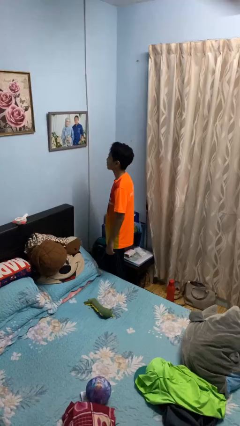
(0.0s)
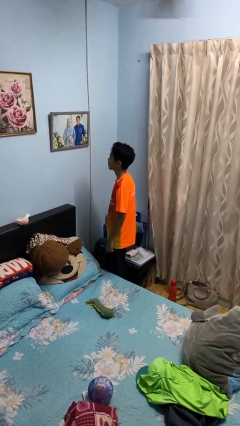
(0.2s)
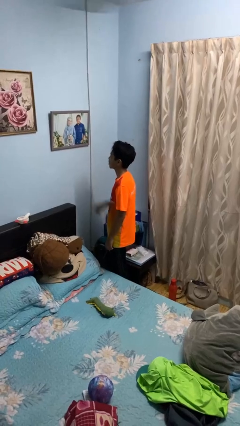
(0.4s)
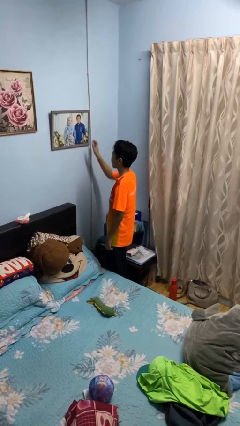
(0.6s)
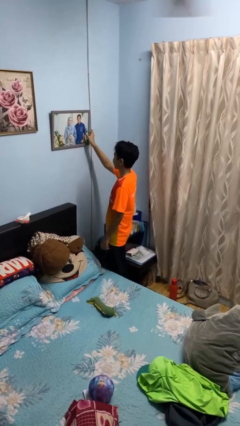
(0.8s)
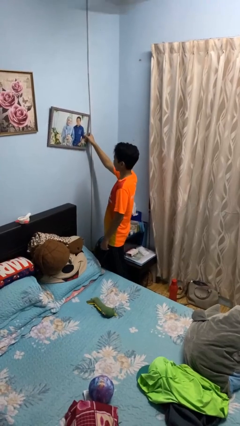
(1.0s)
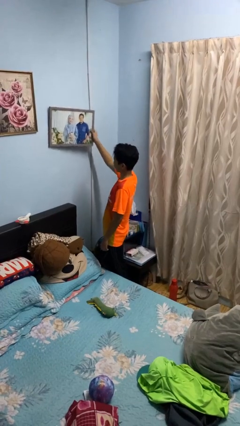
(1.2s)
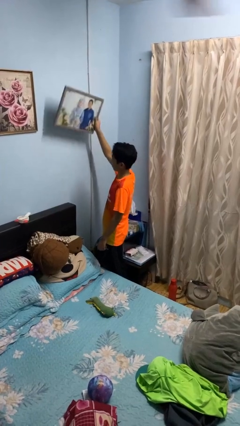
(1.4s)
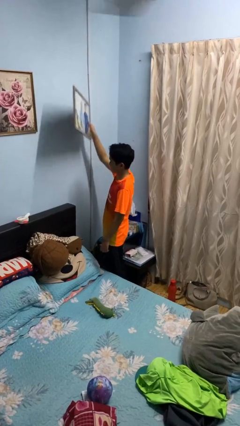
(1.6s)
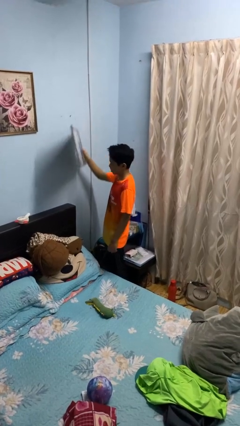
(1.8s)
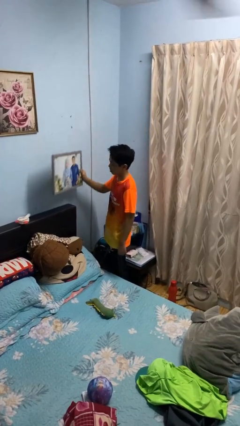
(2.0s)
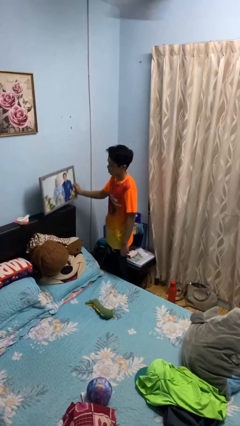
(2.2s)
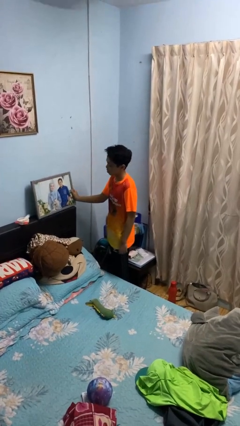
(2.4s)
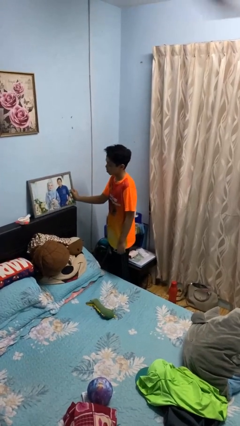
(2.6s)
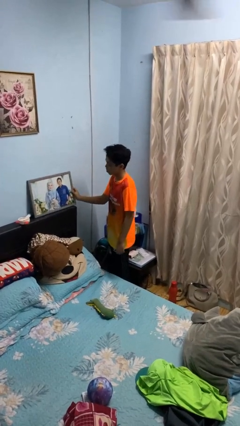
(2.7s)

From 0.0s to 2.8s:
person takes down picture frame

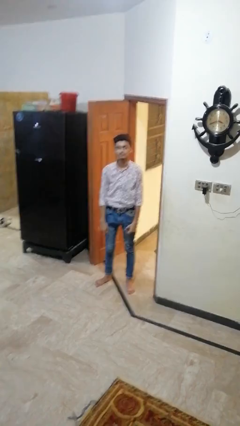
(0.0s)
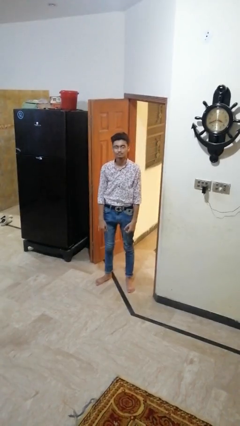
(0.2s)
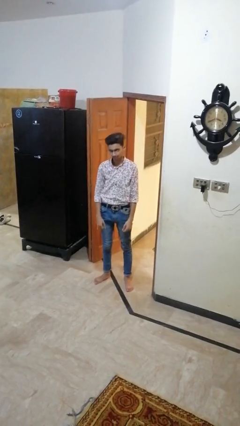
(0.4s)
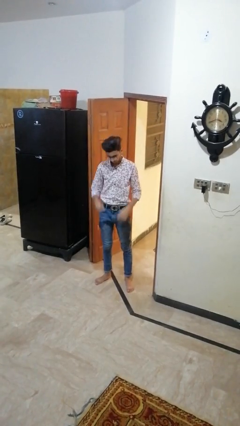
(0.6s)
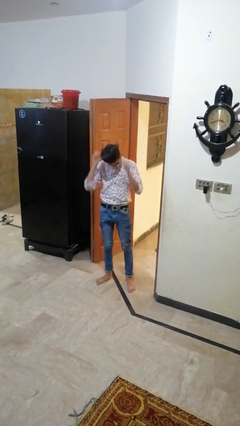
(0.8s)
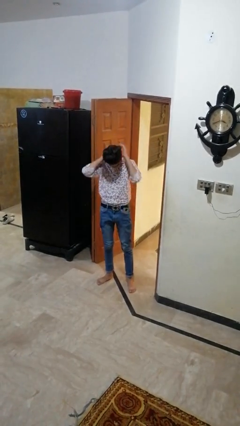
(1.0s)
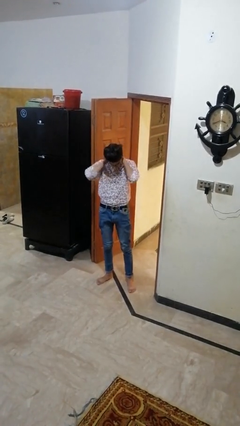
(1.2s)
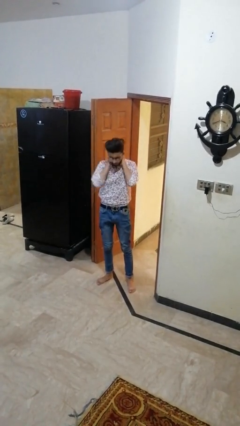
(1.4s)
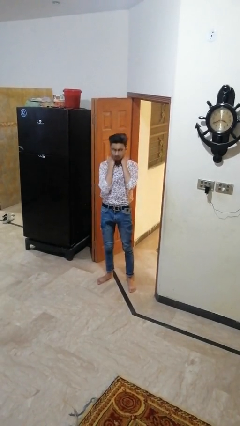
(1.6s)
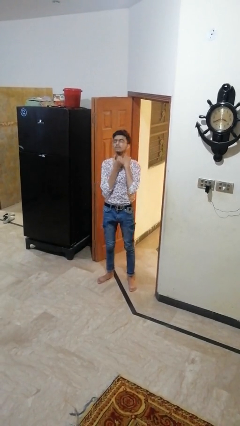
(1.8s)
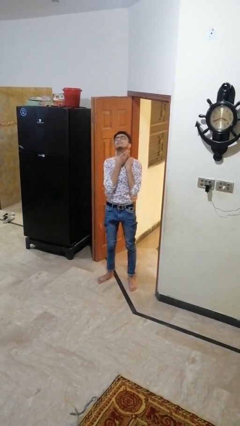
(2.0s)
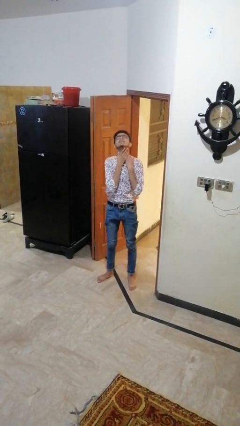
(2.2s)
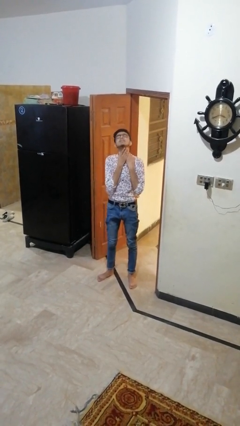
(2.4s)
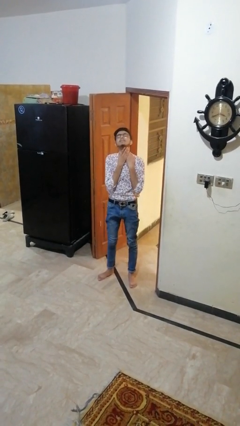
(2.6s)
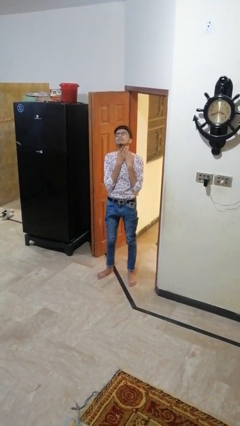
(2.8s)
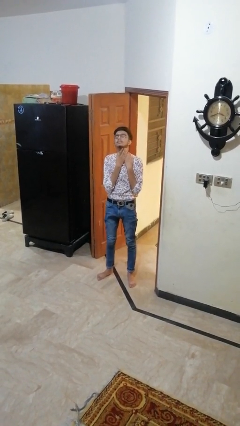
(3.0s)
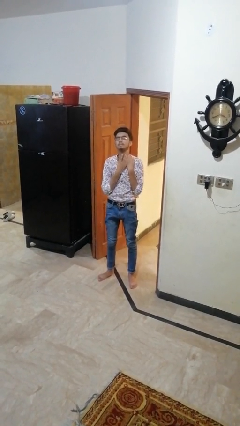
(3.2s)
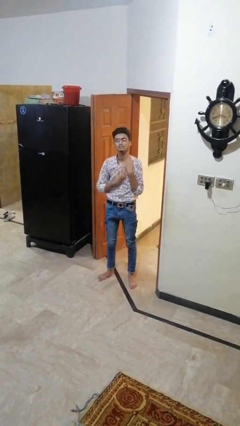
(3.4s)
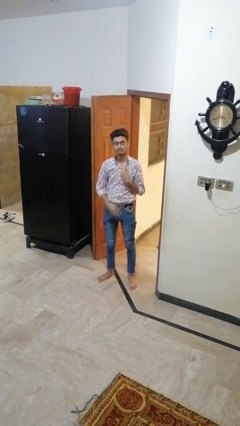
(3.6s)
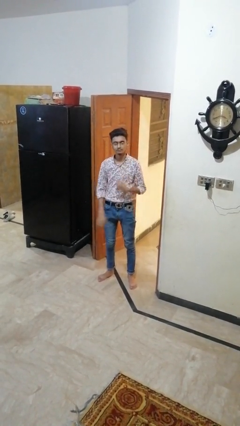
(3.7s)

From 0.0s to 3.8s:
person rubs neck

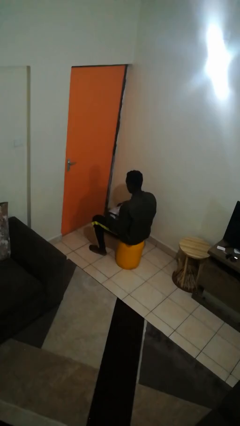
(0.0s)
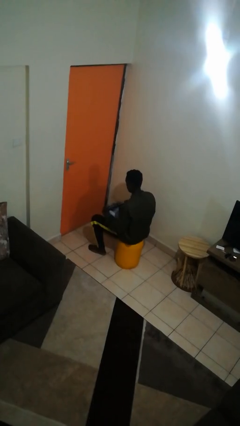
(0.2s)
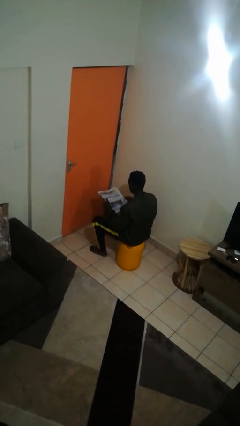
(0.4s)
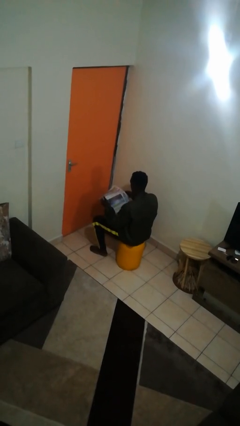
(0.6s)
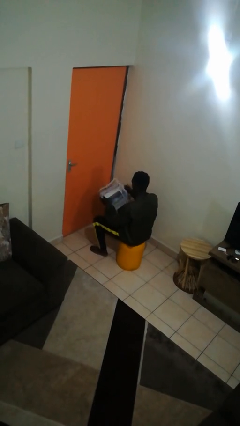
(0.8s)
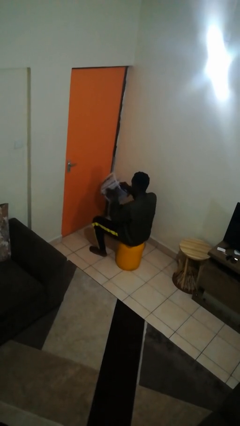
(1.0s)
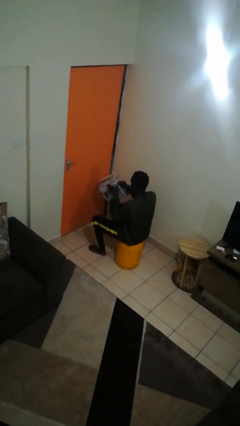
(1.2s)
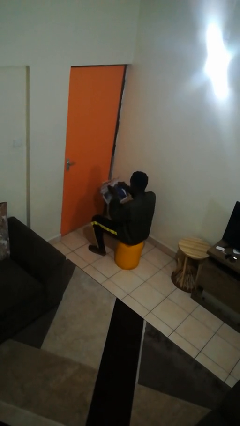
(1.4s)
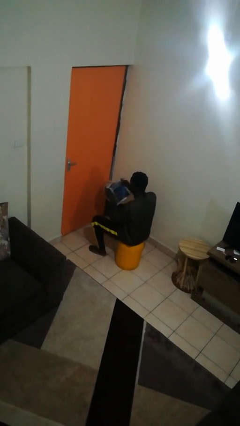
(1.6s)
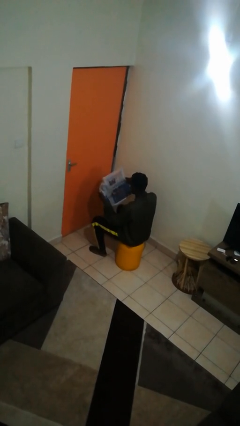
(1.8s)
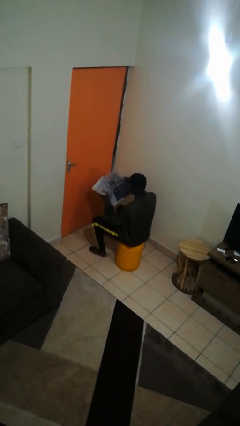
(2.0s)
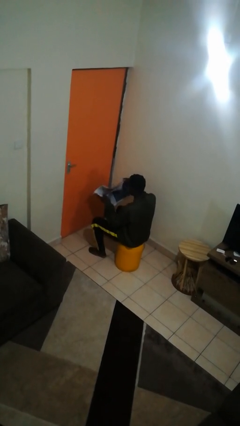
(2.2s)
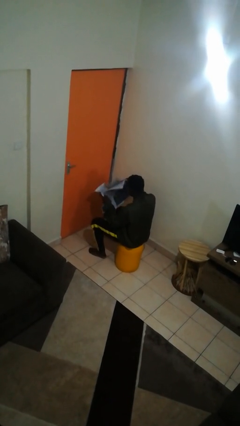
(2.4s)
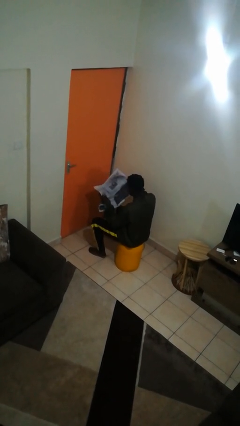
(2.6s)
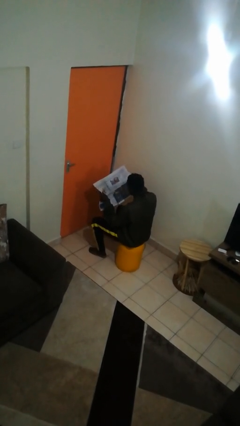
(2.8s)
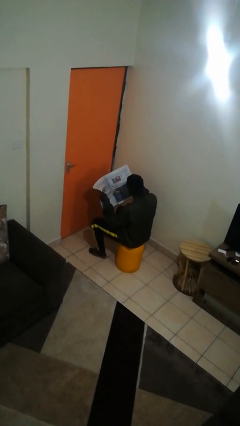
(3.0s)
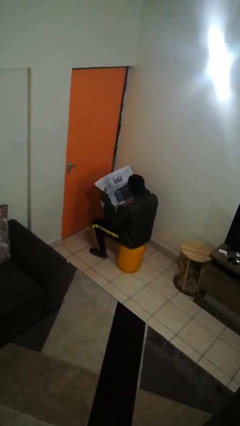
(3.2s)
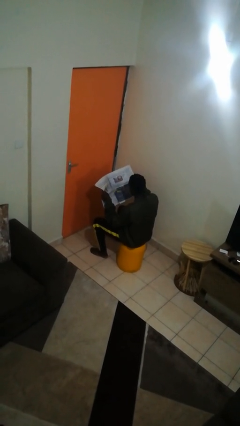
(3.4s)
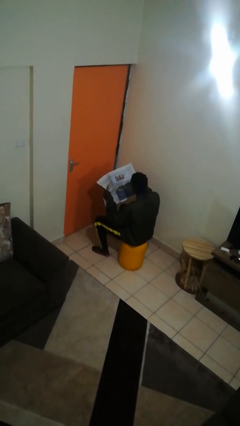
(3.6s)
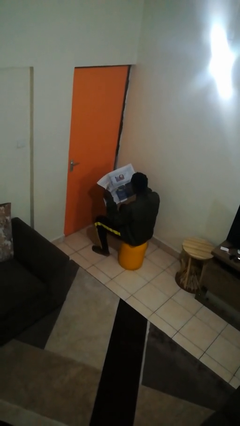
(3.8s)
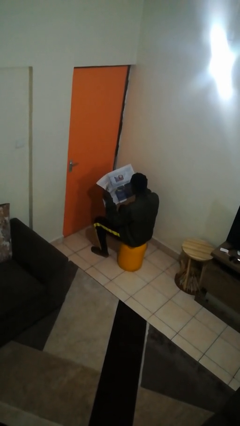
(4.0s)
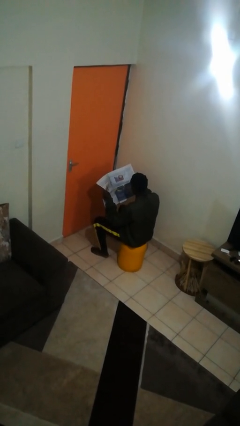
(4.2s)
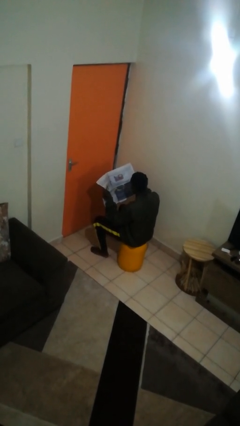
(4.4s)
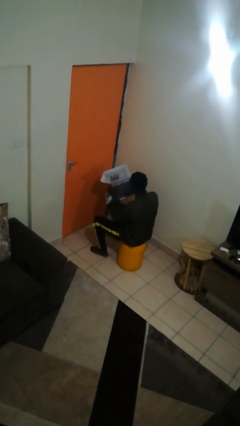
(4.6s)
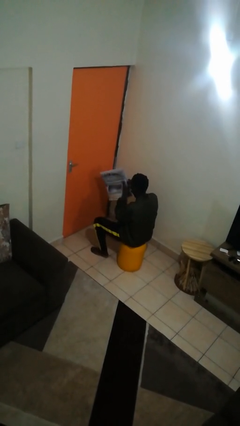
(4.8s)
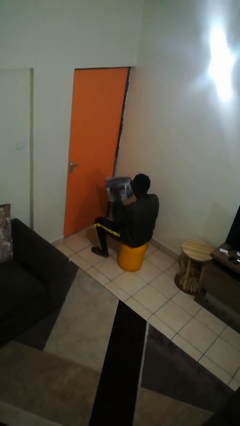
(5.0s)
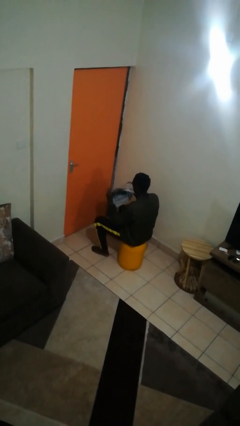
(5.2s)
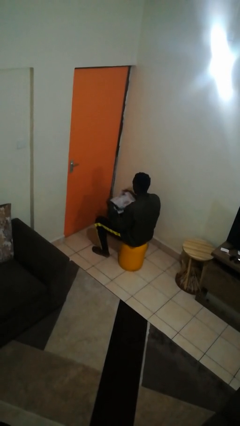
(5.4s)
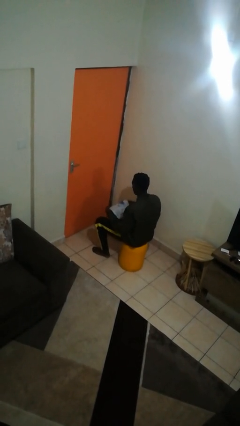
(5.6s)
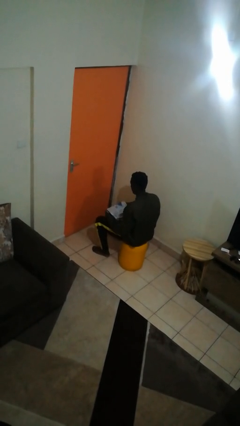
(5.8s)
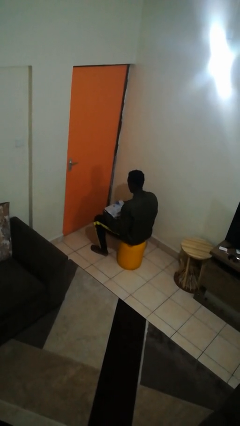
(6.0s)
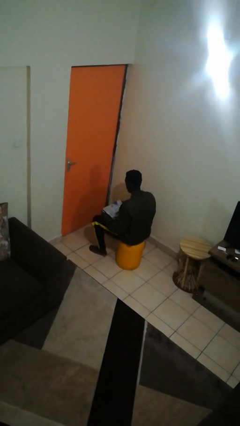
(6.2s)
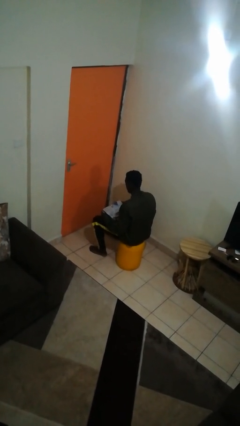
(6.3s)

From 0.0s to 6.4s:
person reads newspaper

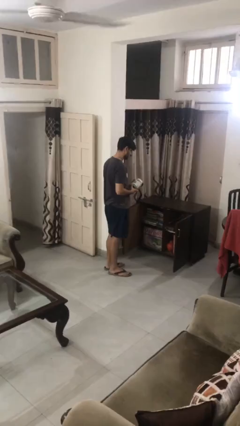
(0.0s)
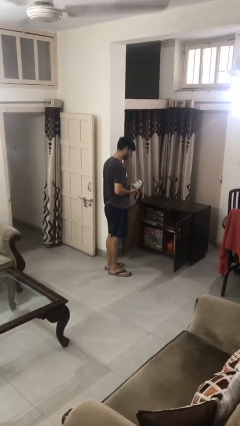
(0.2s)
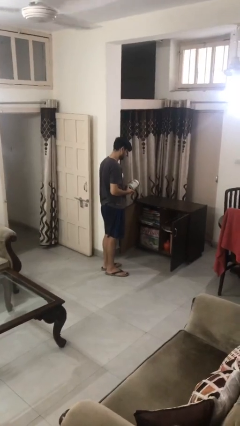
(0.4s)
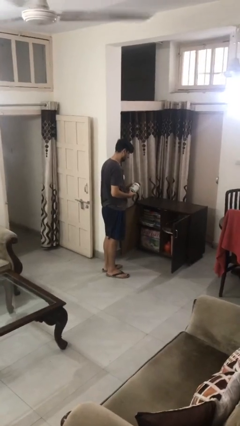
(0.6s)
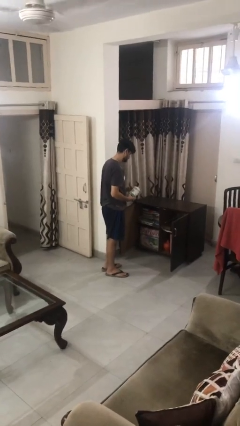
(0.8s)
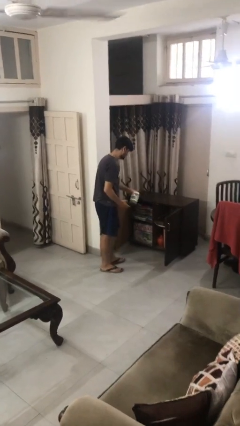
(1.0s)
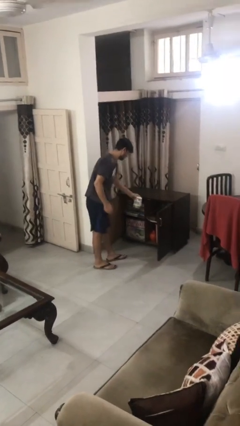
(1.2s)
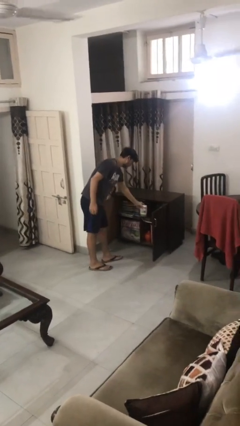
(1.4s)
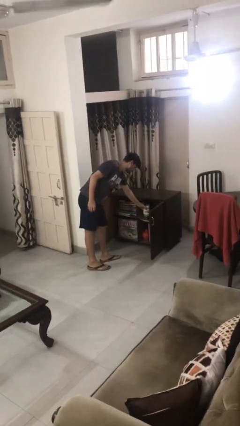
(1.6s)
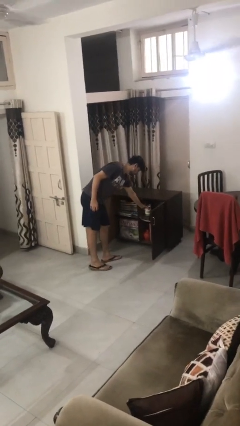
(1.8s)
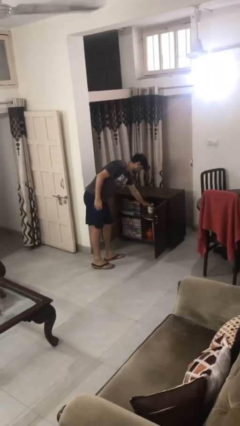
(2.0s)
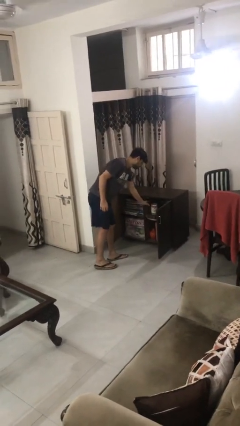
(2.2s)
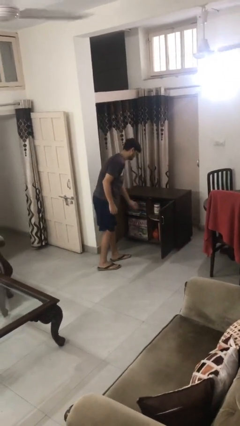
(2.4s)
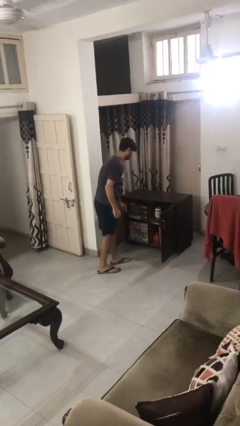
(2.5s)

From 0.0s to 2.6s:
person puts down object into cabinet

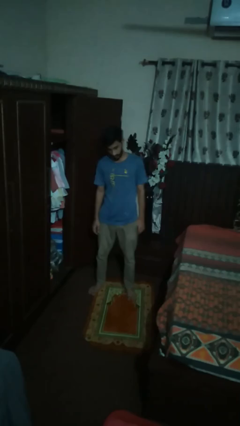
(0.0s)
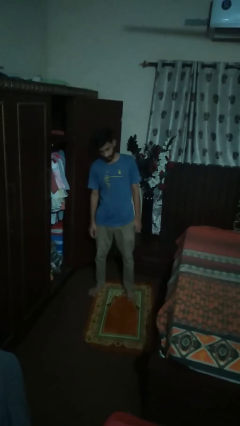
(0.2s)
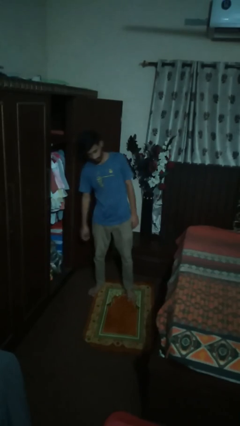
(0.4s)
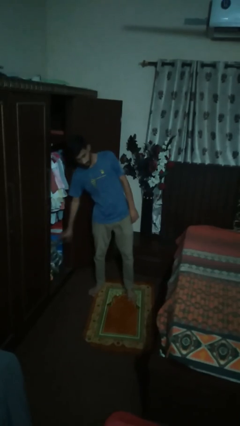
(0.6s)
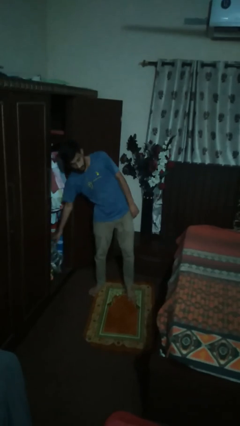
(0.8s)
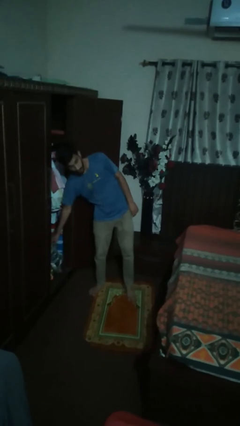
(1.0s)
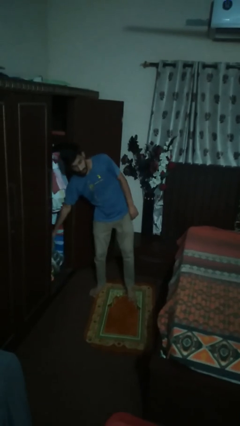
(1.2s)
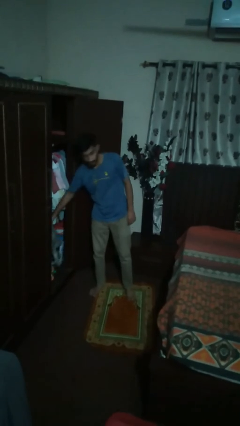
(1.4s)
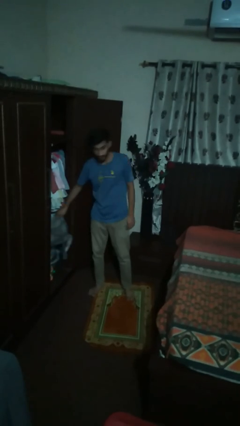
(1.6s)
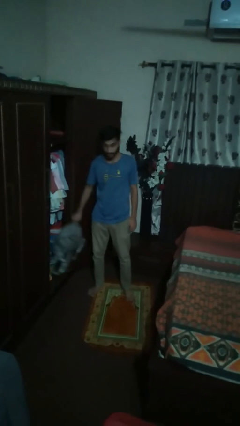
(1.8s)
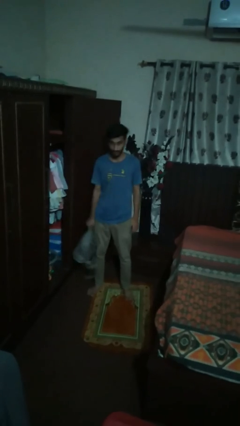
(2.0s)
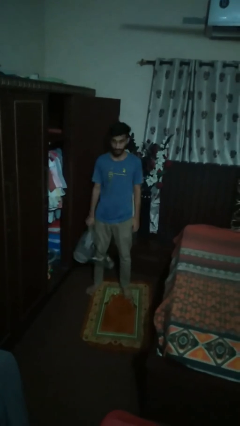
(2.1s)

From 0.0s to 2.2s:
person picks up object from cabinet
